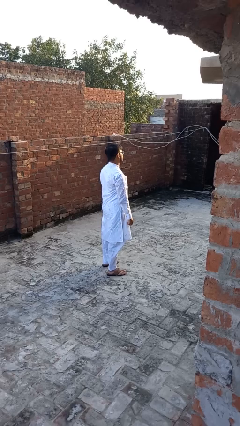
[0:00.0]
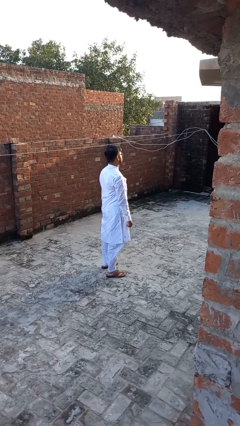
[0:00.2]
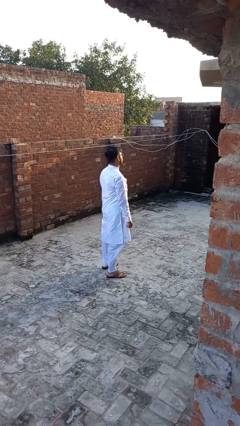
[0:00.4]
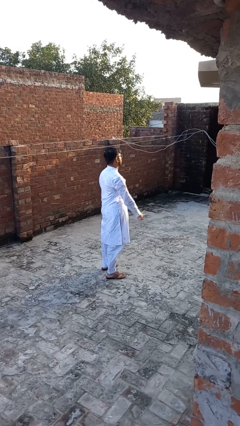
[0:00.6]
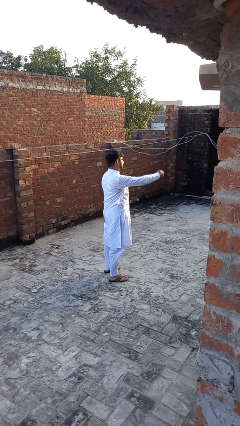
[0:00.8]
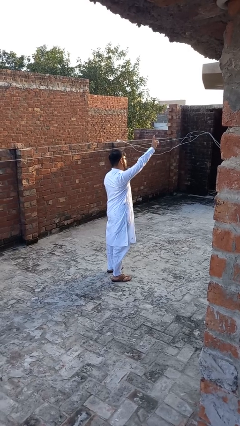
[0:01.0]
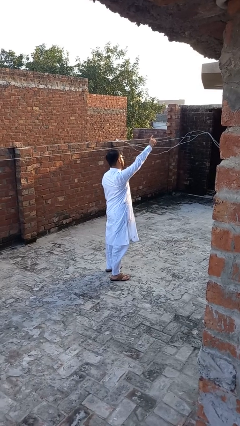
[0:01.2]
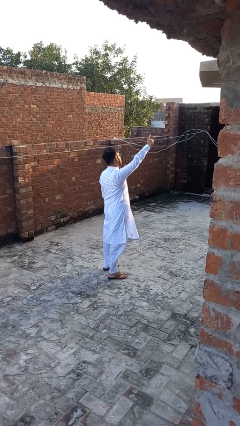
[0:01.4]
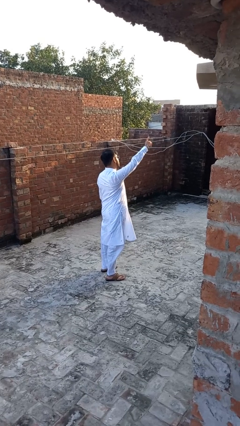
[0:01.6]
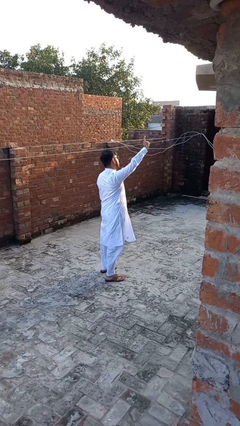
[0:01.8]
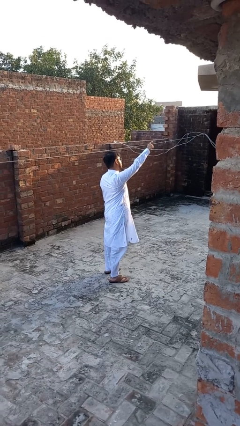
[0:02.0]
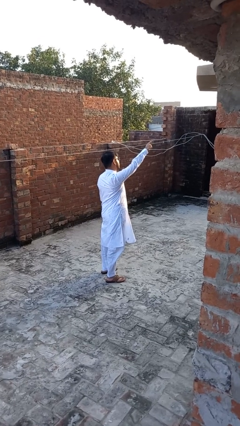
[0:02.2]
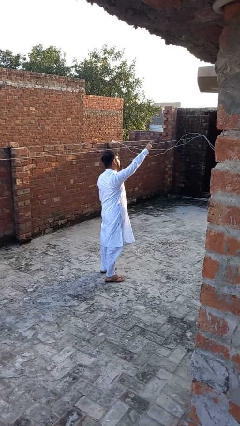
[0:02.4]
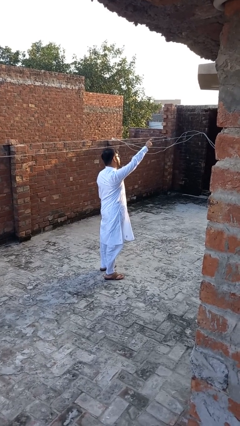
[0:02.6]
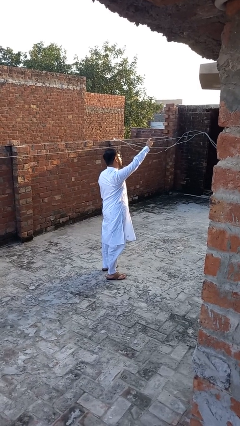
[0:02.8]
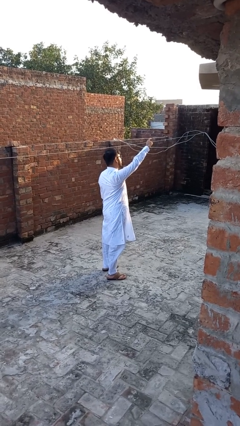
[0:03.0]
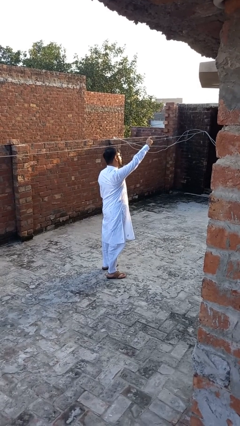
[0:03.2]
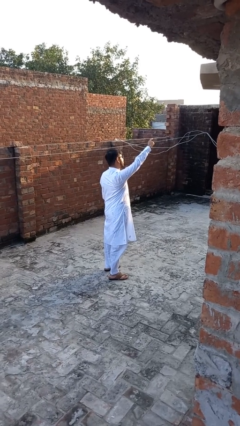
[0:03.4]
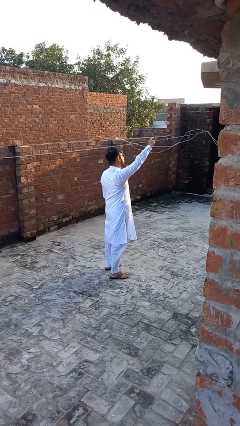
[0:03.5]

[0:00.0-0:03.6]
person gestures raise hand

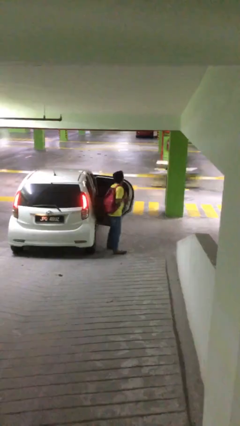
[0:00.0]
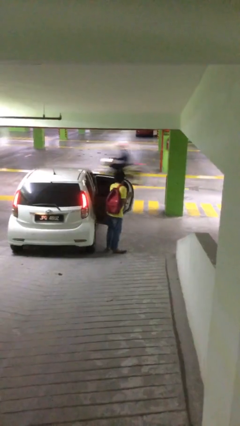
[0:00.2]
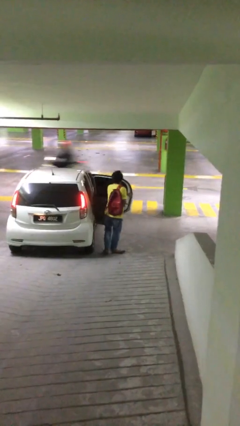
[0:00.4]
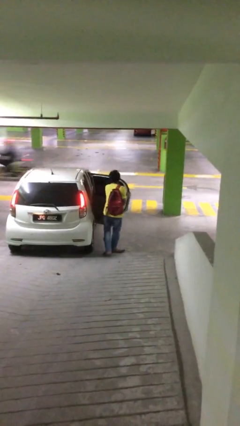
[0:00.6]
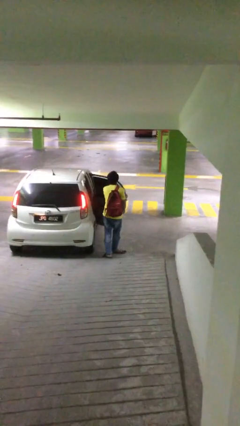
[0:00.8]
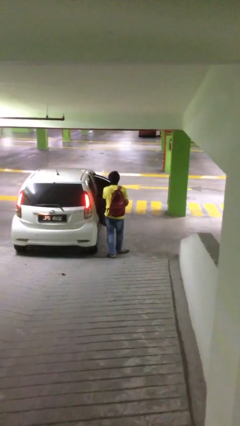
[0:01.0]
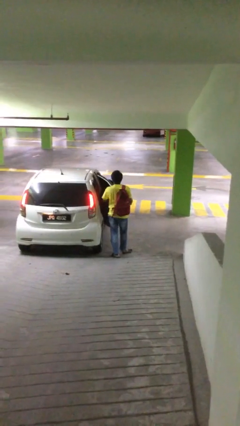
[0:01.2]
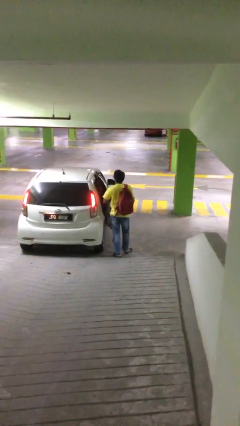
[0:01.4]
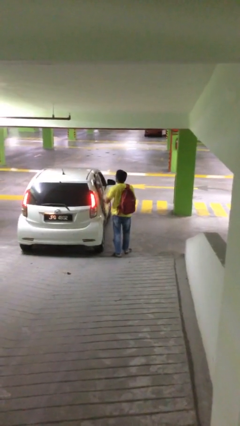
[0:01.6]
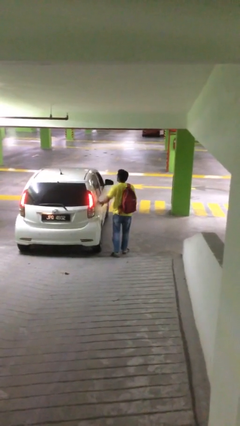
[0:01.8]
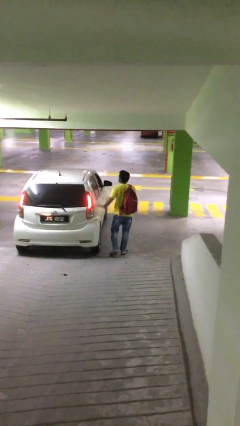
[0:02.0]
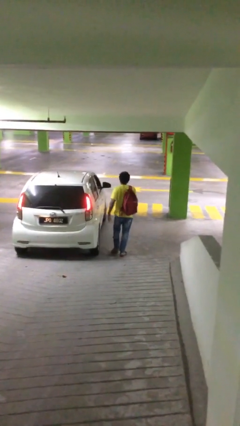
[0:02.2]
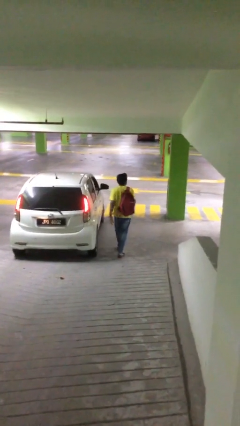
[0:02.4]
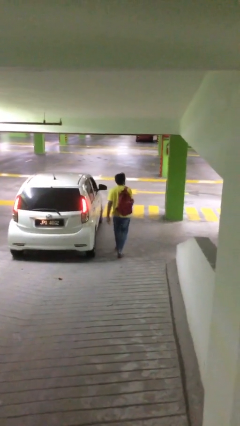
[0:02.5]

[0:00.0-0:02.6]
person closes car door

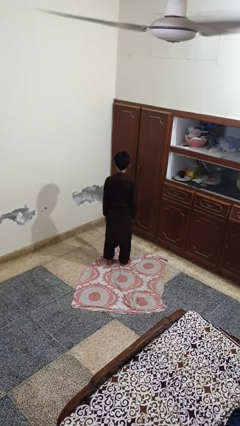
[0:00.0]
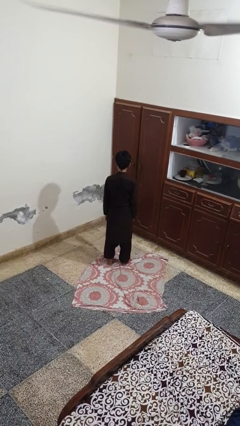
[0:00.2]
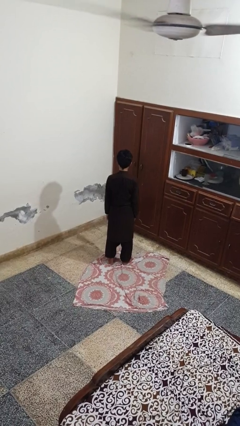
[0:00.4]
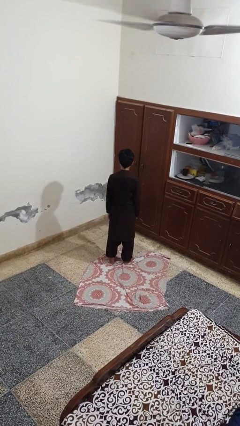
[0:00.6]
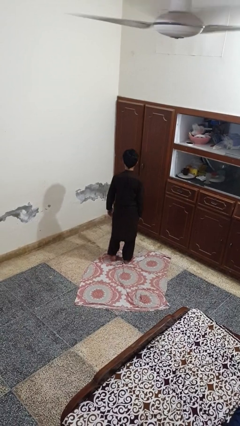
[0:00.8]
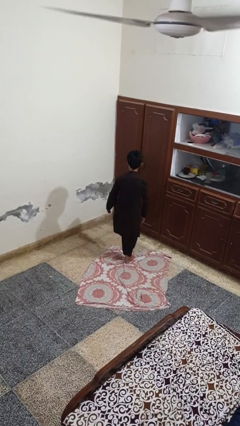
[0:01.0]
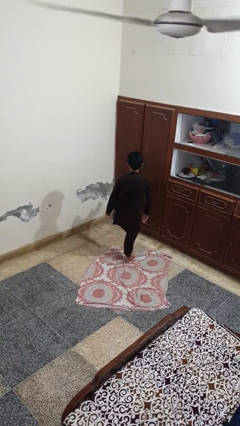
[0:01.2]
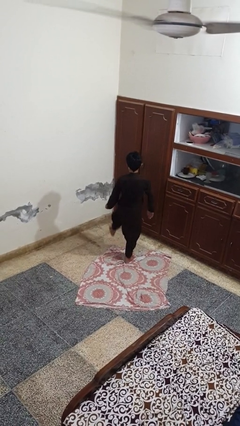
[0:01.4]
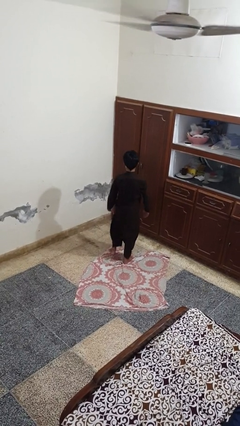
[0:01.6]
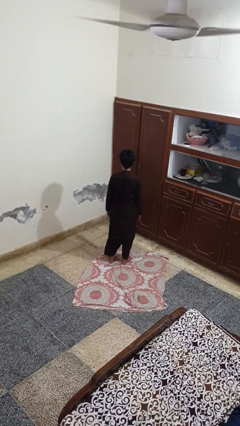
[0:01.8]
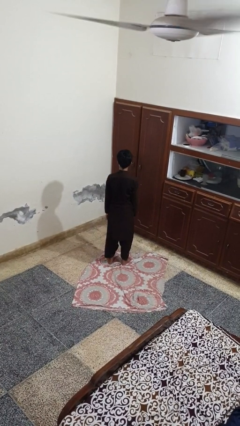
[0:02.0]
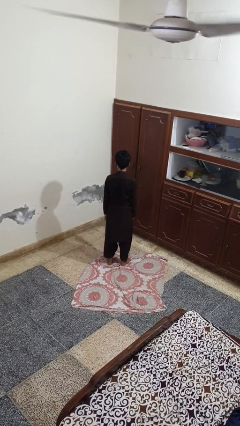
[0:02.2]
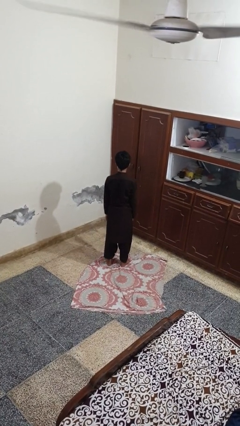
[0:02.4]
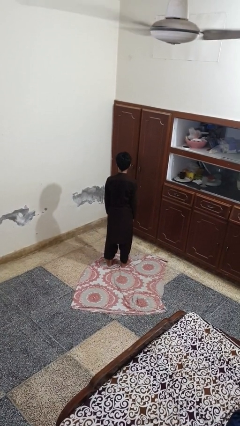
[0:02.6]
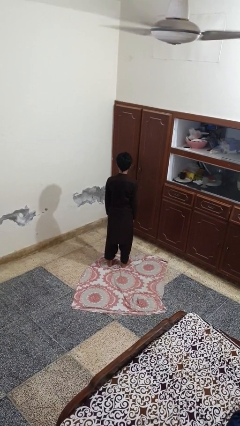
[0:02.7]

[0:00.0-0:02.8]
person karate kicks

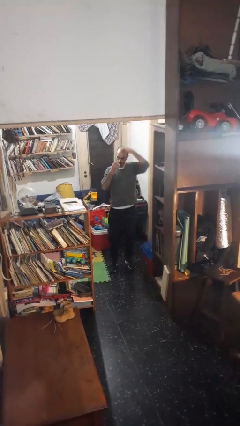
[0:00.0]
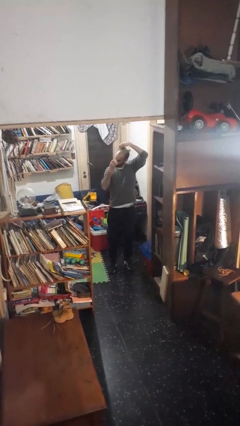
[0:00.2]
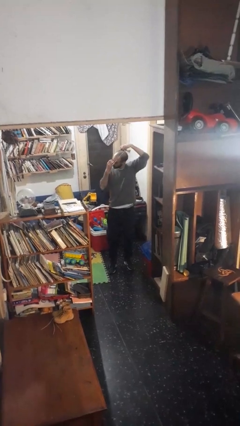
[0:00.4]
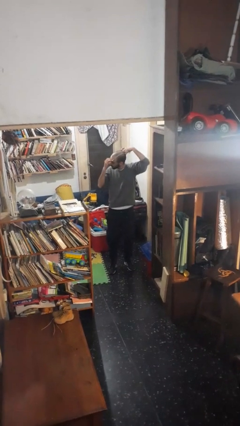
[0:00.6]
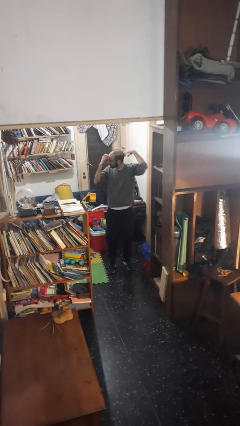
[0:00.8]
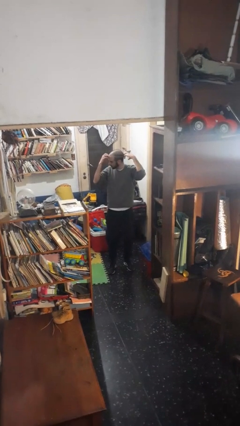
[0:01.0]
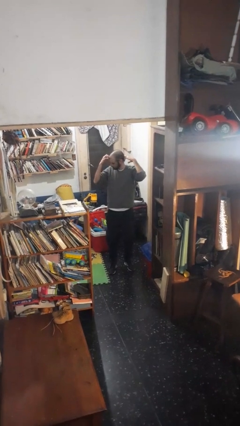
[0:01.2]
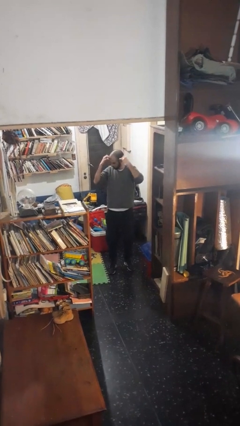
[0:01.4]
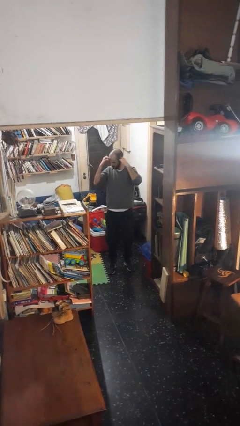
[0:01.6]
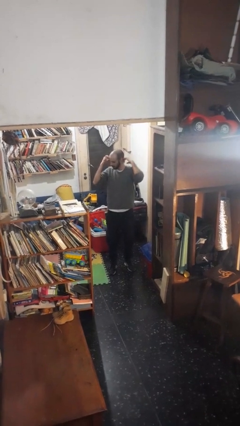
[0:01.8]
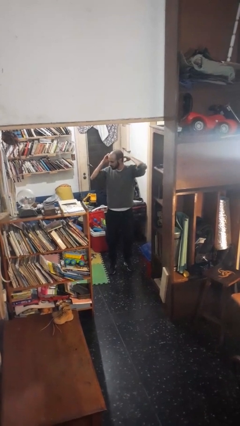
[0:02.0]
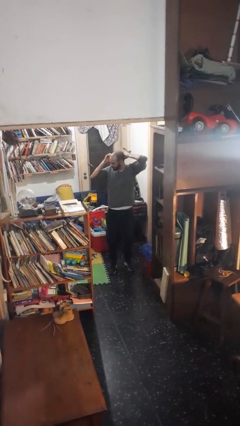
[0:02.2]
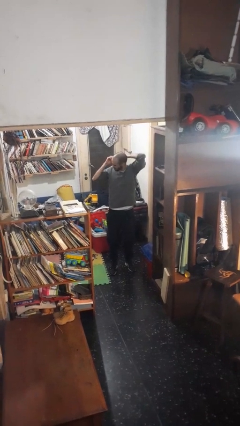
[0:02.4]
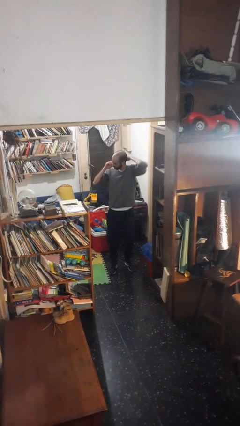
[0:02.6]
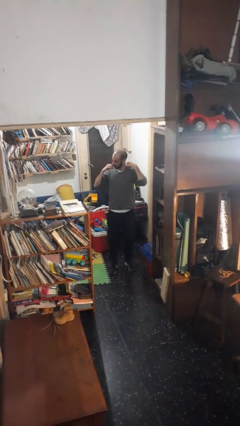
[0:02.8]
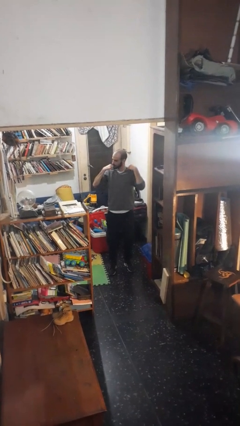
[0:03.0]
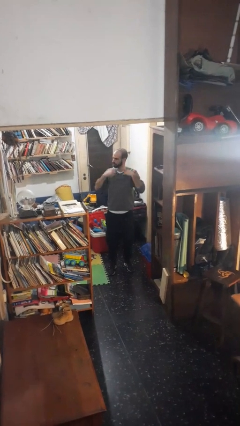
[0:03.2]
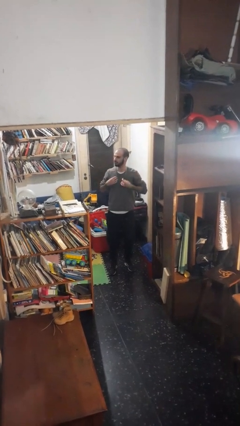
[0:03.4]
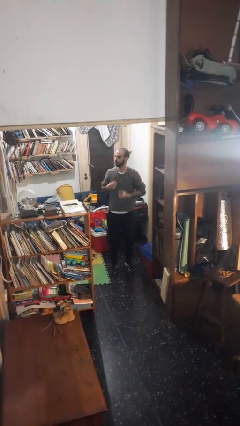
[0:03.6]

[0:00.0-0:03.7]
person puts on necklace

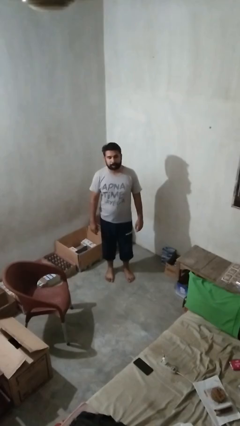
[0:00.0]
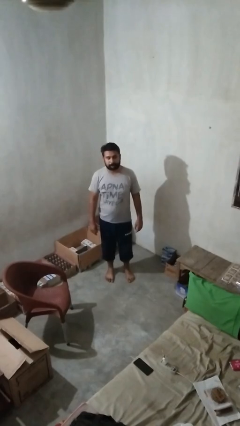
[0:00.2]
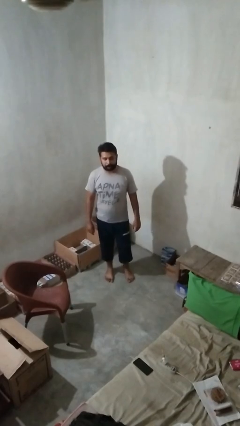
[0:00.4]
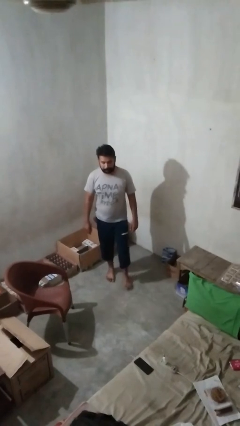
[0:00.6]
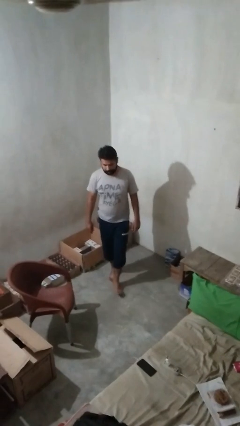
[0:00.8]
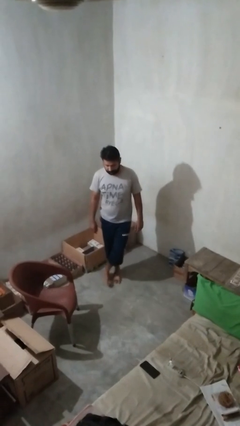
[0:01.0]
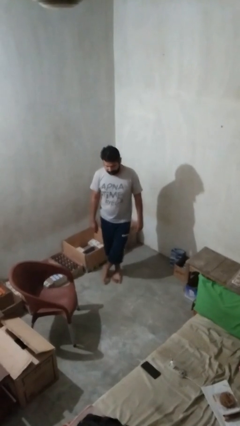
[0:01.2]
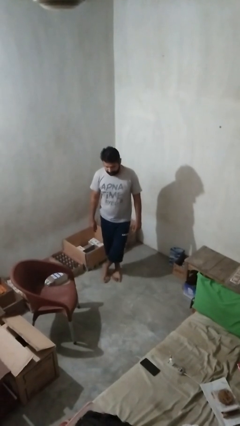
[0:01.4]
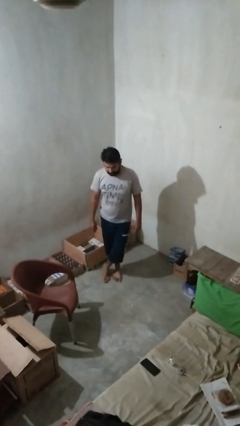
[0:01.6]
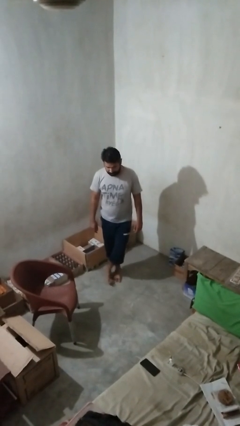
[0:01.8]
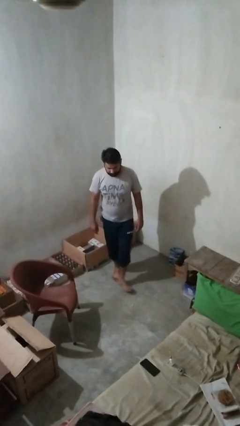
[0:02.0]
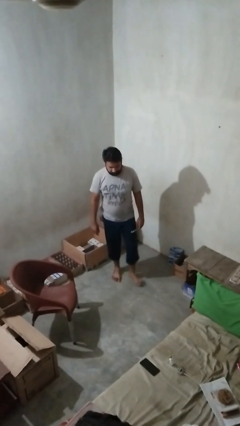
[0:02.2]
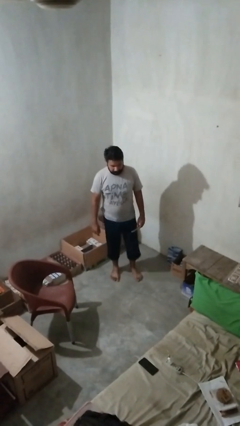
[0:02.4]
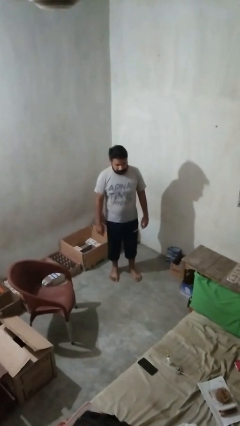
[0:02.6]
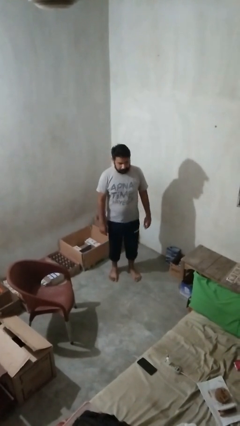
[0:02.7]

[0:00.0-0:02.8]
person crosses legs

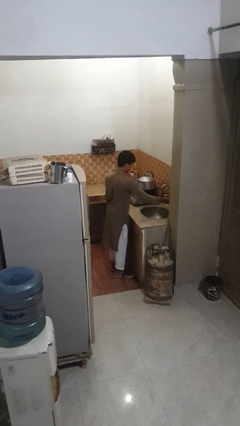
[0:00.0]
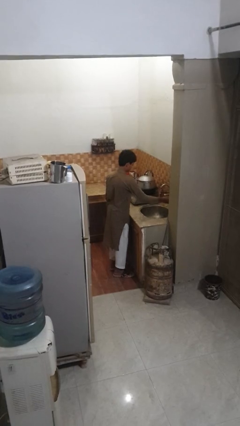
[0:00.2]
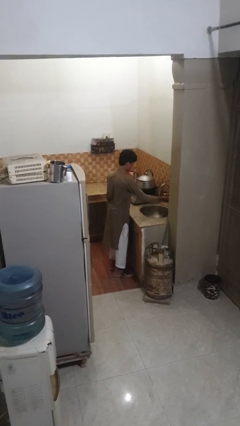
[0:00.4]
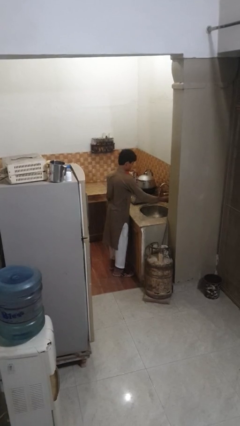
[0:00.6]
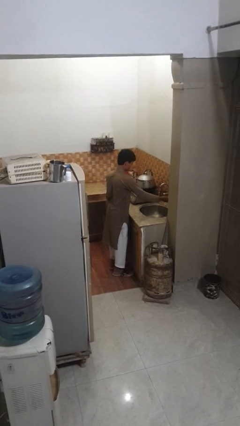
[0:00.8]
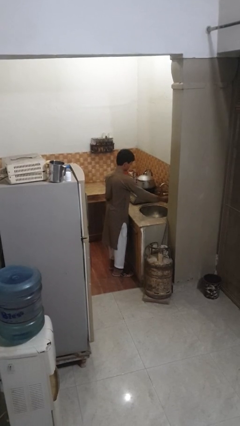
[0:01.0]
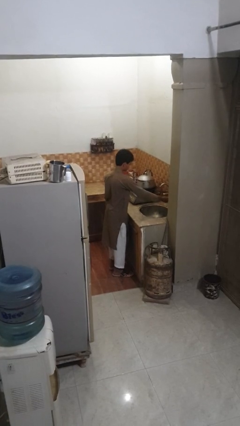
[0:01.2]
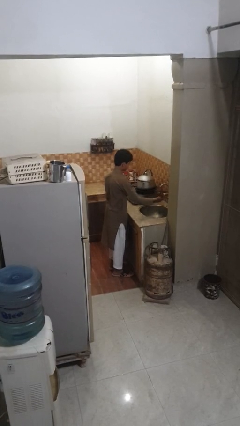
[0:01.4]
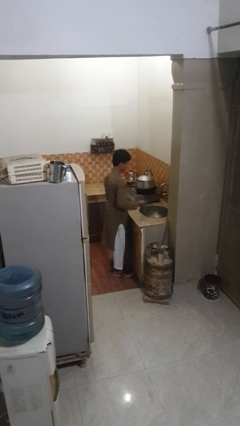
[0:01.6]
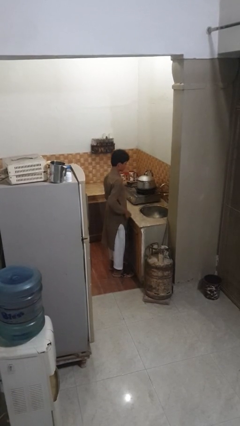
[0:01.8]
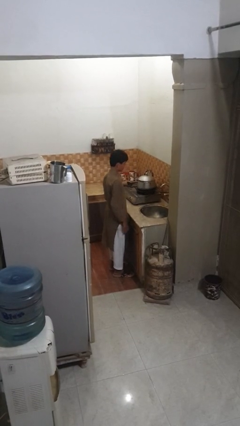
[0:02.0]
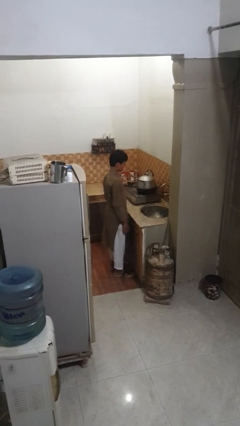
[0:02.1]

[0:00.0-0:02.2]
person turns off faucet
